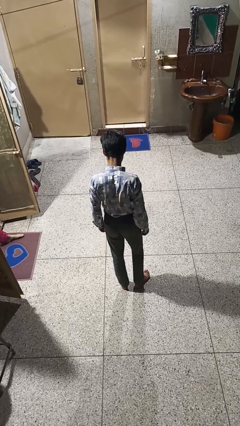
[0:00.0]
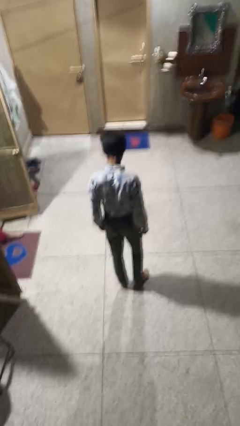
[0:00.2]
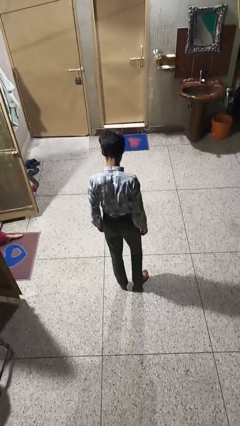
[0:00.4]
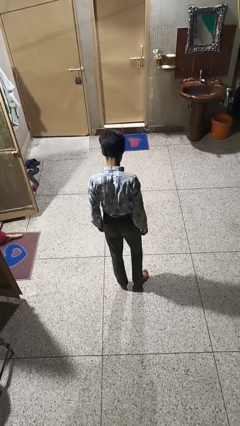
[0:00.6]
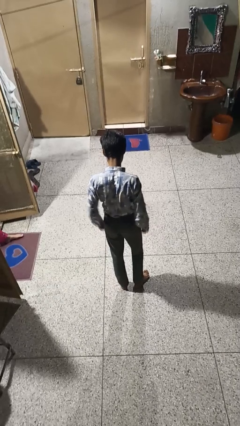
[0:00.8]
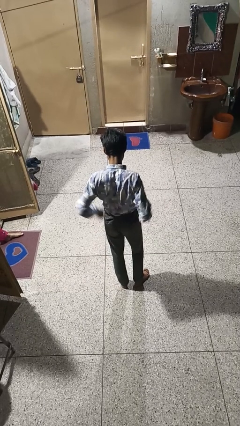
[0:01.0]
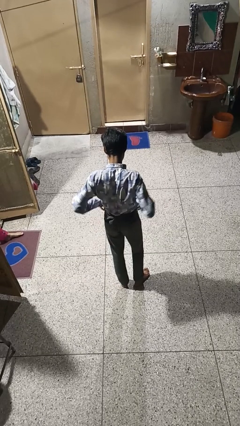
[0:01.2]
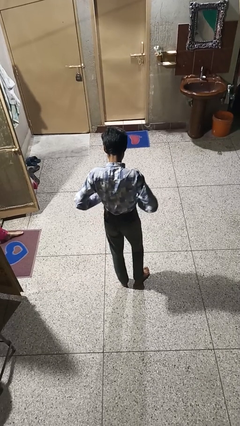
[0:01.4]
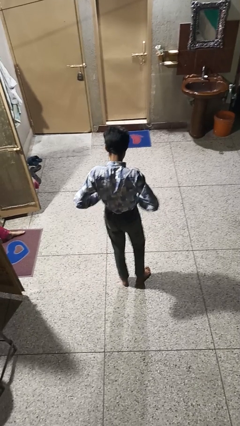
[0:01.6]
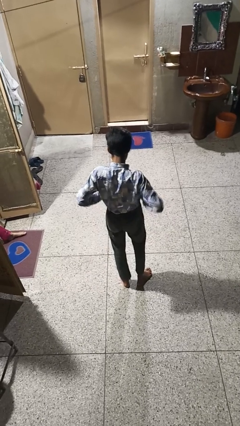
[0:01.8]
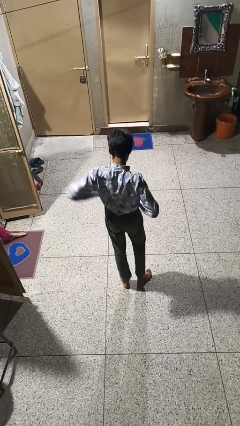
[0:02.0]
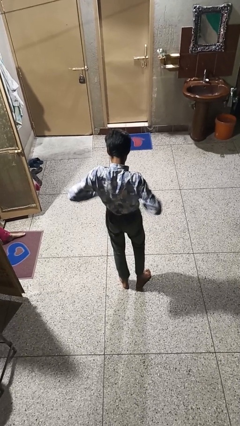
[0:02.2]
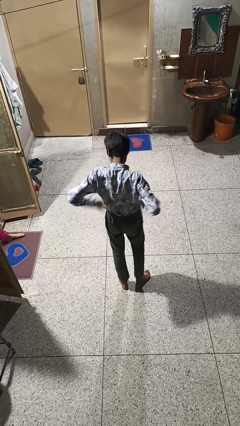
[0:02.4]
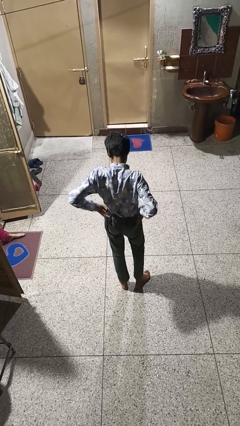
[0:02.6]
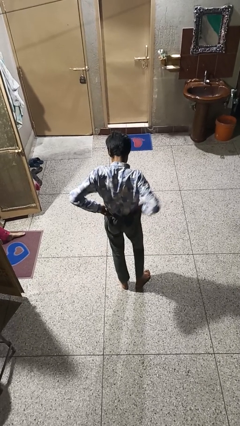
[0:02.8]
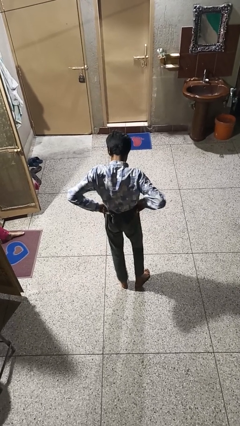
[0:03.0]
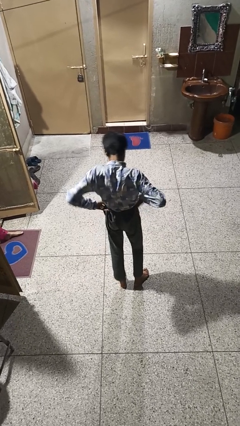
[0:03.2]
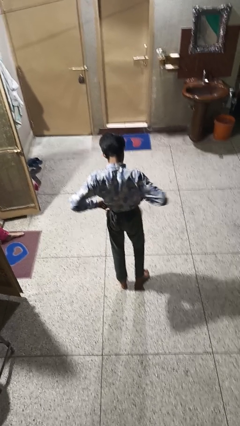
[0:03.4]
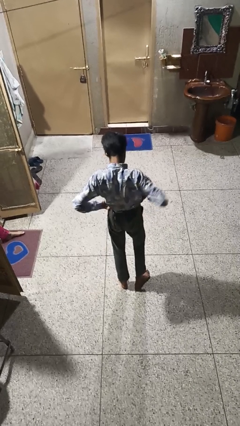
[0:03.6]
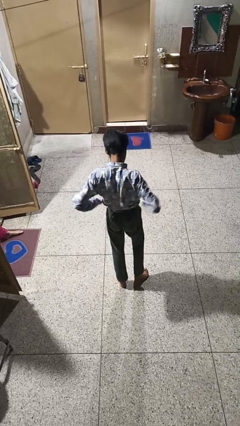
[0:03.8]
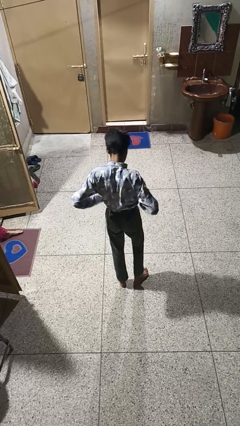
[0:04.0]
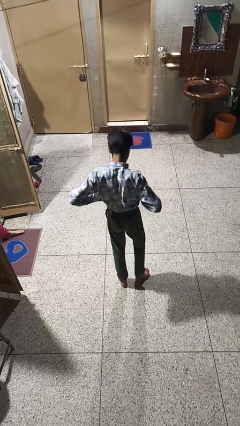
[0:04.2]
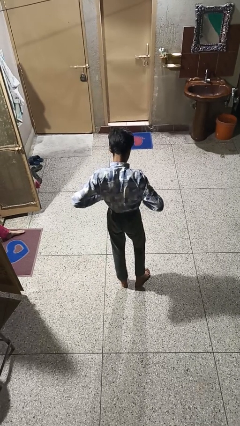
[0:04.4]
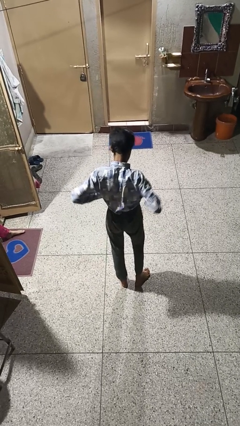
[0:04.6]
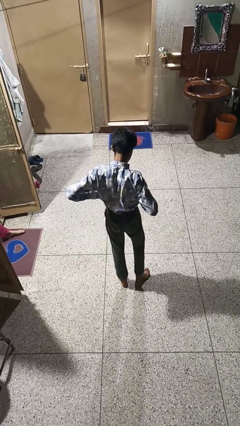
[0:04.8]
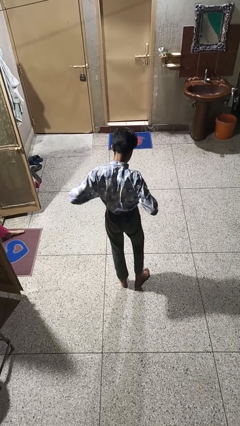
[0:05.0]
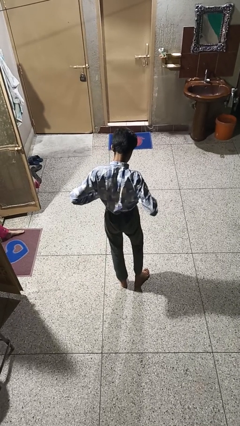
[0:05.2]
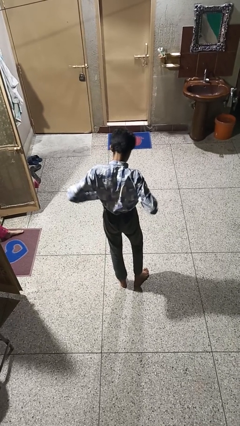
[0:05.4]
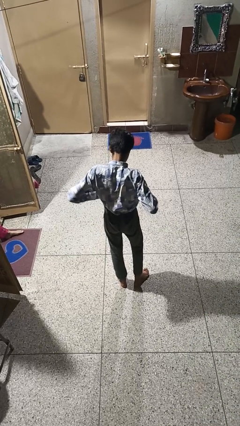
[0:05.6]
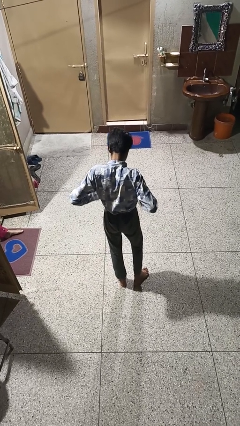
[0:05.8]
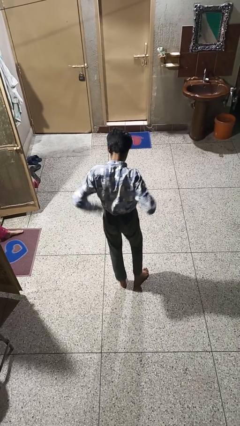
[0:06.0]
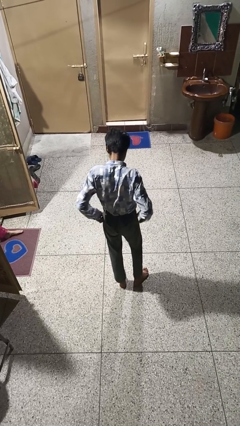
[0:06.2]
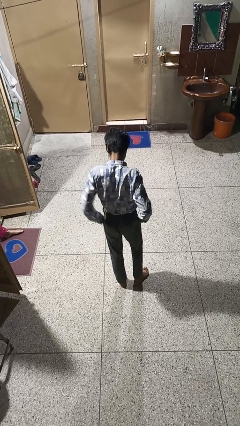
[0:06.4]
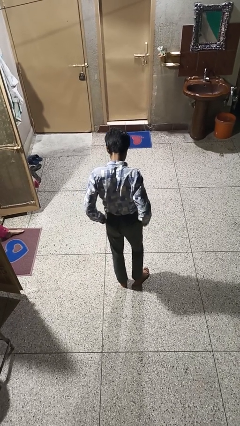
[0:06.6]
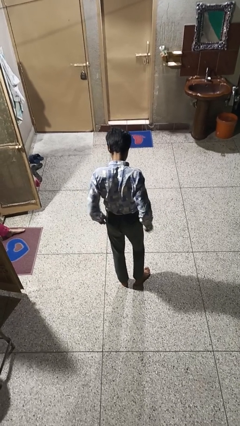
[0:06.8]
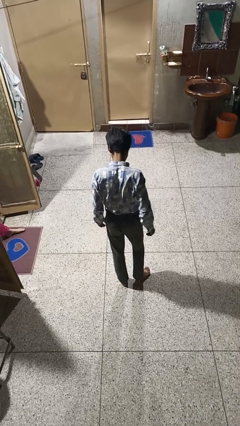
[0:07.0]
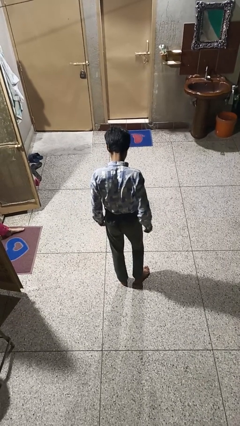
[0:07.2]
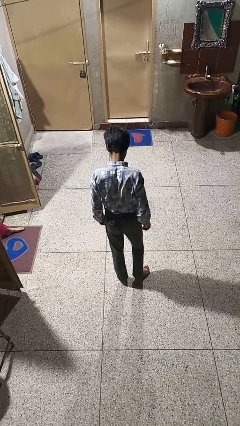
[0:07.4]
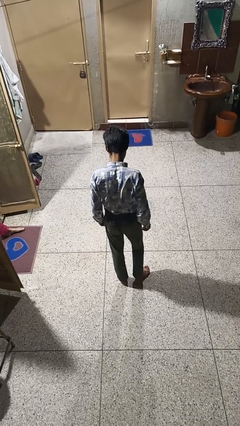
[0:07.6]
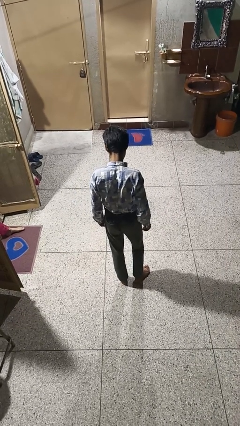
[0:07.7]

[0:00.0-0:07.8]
person hikes up pants

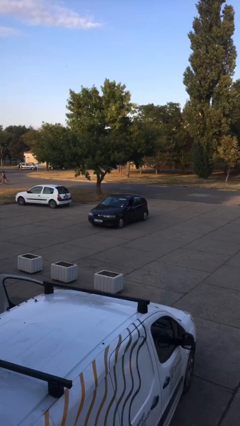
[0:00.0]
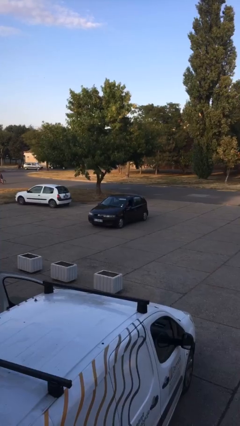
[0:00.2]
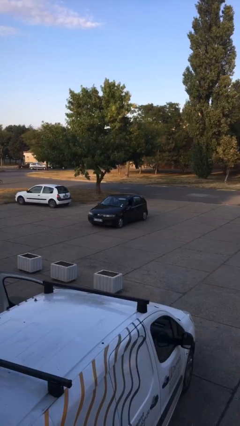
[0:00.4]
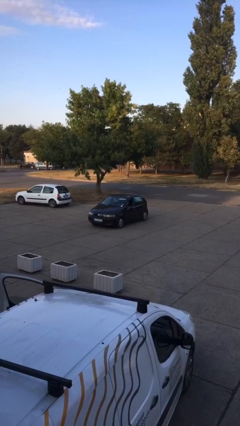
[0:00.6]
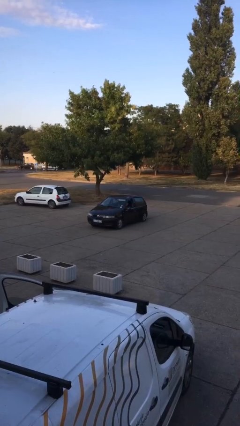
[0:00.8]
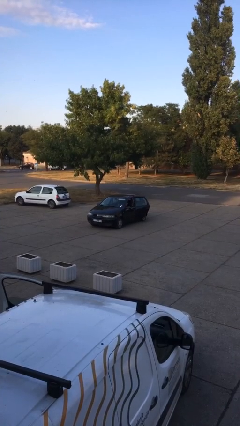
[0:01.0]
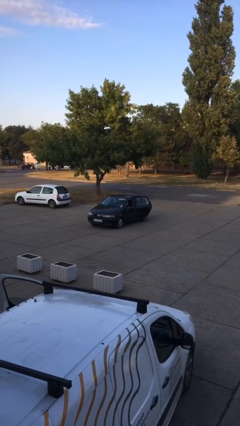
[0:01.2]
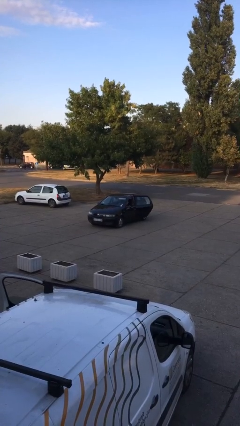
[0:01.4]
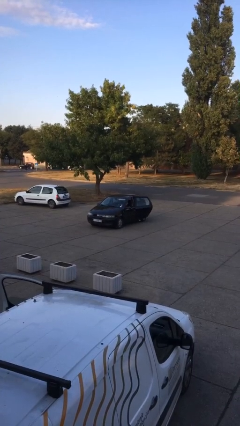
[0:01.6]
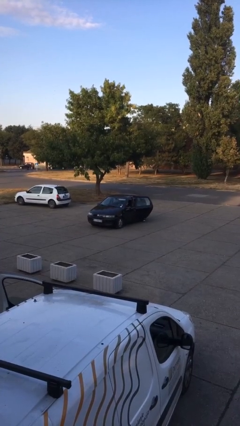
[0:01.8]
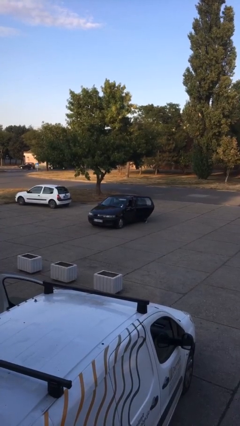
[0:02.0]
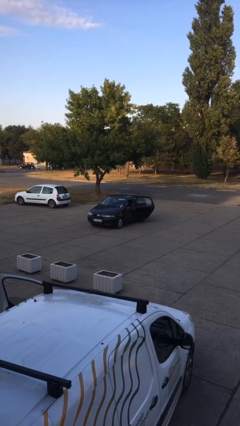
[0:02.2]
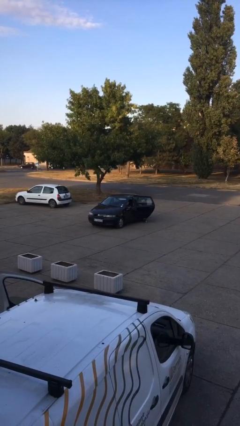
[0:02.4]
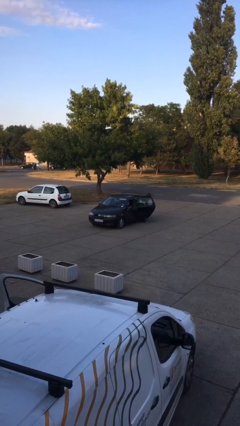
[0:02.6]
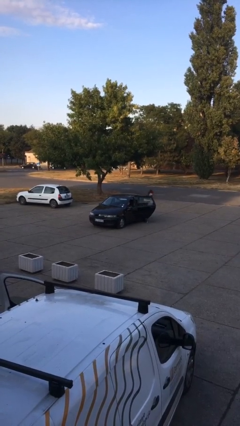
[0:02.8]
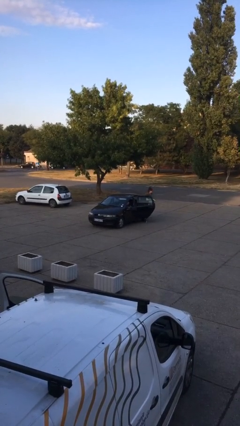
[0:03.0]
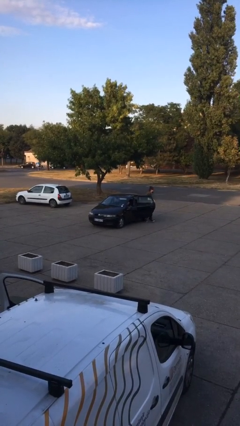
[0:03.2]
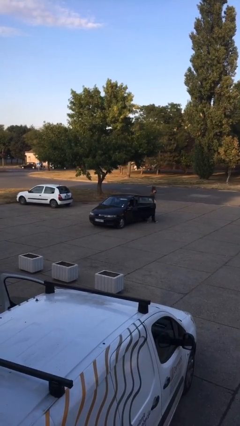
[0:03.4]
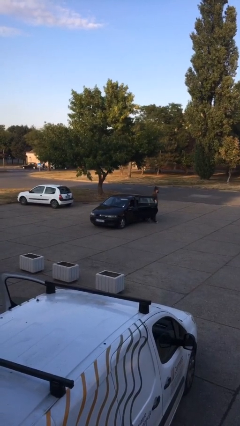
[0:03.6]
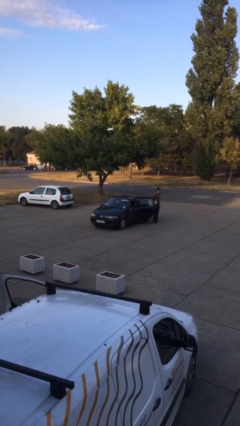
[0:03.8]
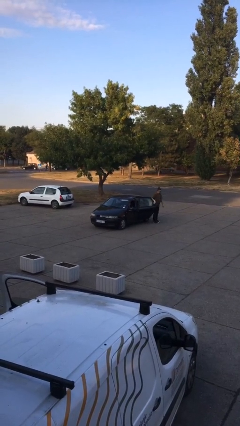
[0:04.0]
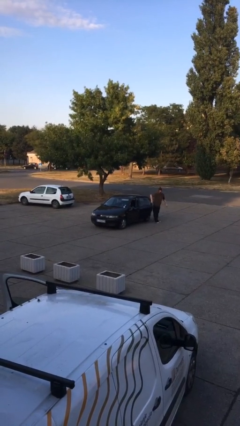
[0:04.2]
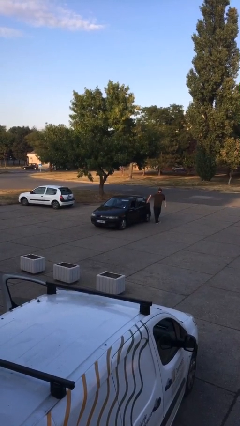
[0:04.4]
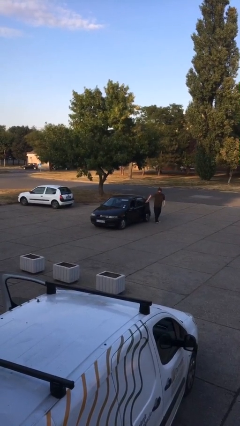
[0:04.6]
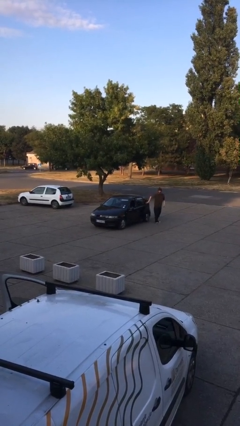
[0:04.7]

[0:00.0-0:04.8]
car drops off person

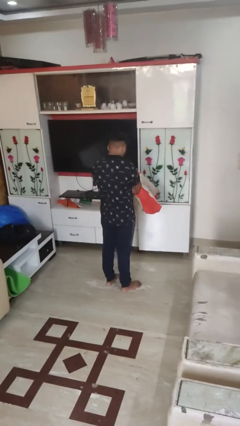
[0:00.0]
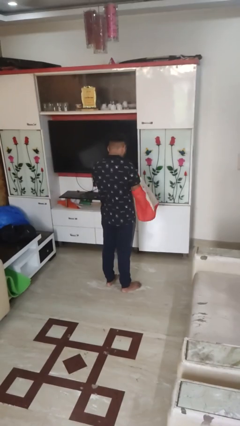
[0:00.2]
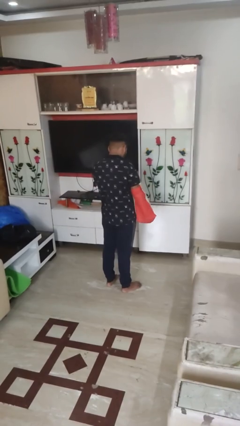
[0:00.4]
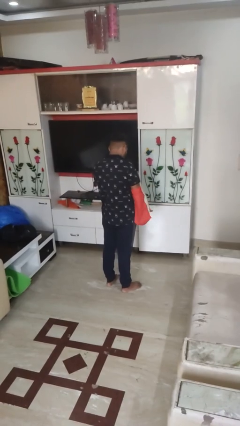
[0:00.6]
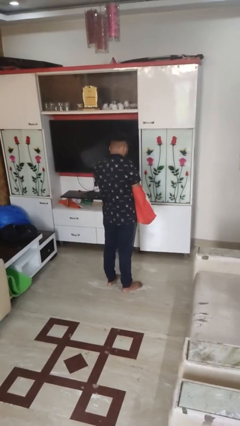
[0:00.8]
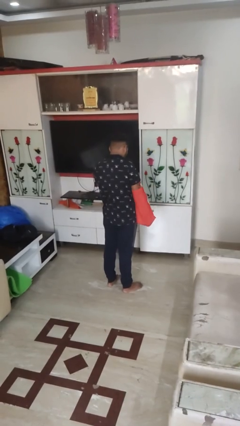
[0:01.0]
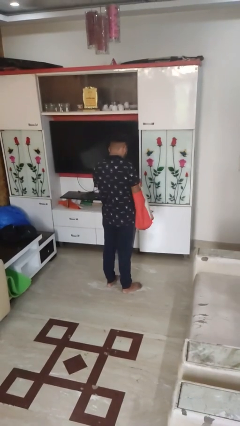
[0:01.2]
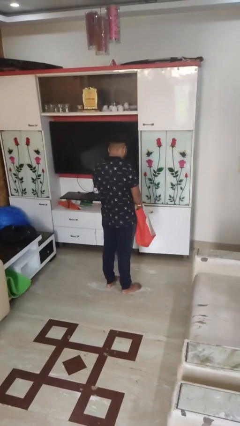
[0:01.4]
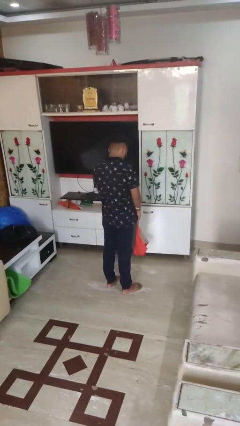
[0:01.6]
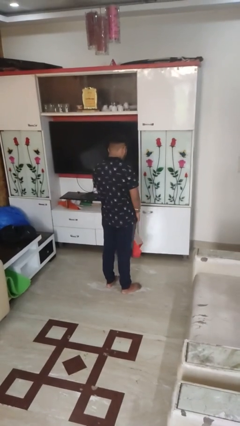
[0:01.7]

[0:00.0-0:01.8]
person searches in bag

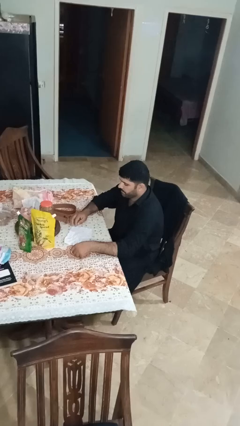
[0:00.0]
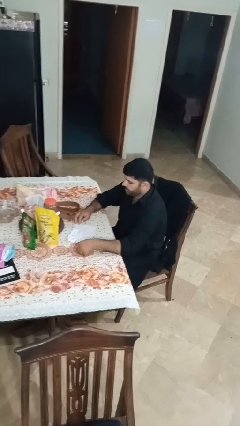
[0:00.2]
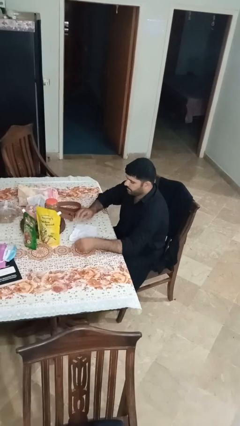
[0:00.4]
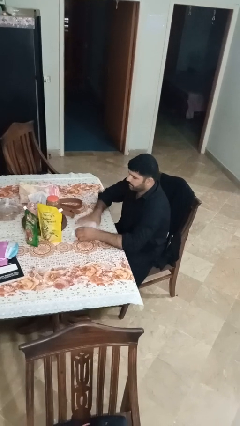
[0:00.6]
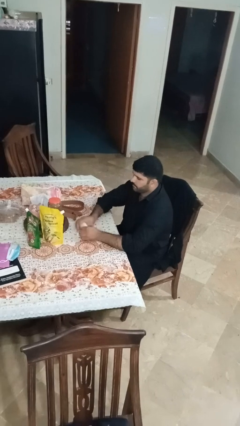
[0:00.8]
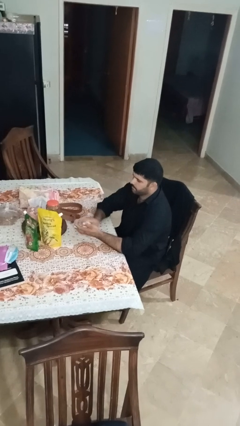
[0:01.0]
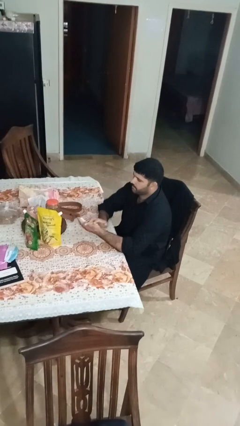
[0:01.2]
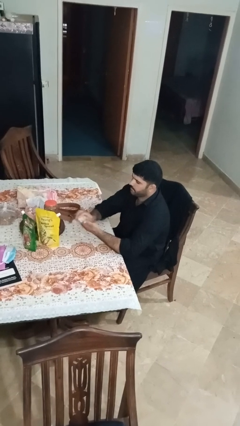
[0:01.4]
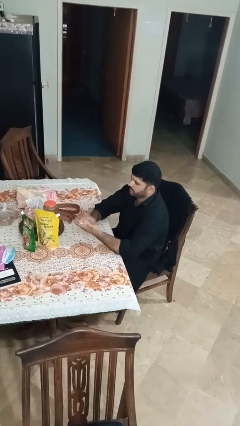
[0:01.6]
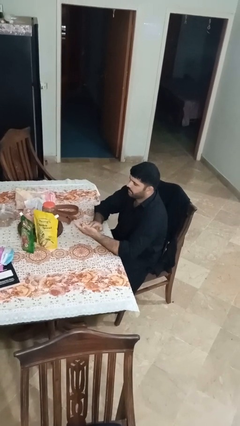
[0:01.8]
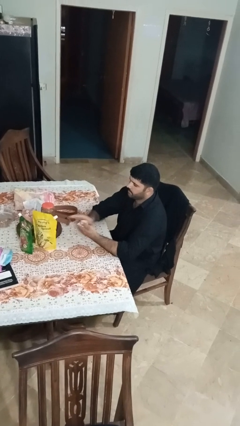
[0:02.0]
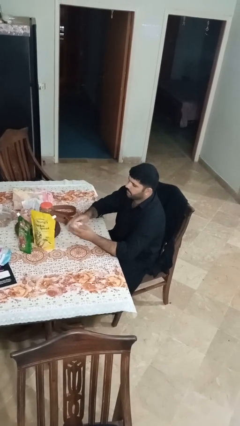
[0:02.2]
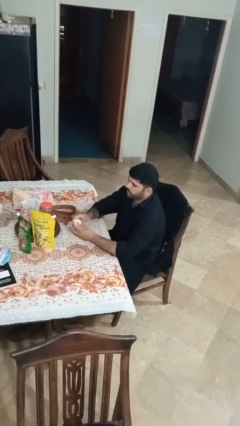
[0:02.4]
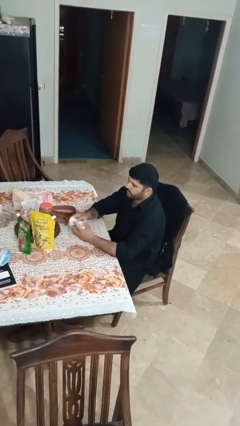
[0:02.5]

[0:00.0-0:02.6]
person crumples paper

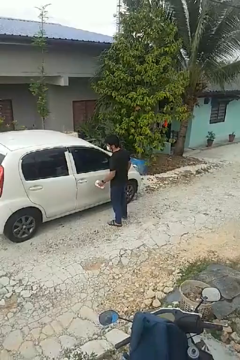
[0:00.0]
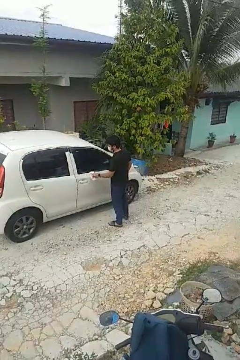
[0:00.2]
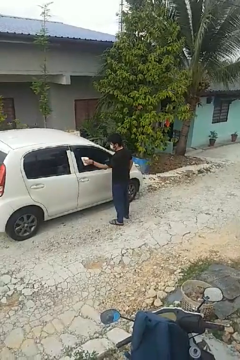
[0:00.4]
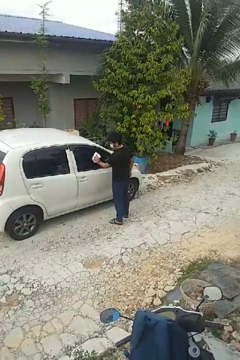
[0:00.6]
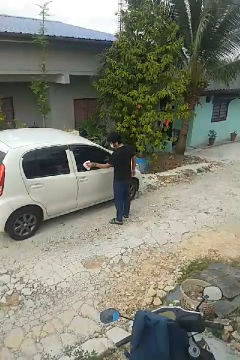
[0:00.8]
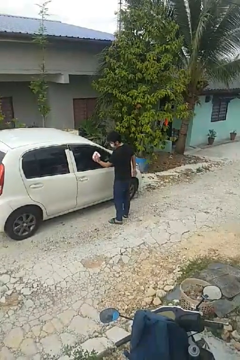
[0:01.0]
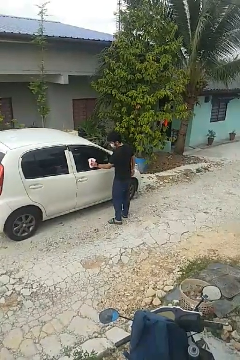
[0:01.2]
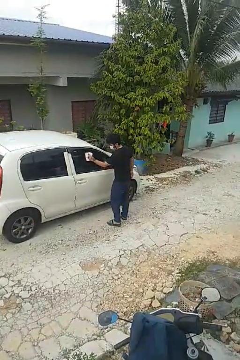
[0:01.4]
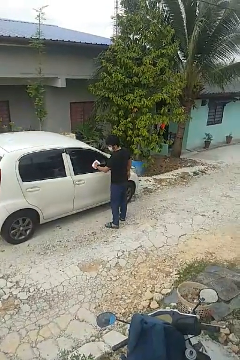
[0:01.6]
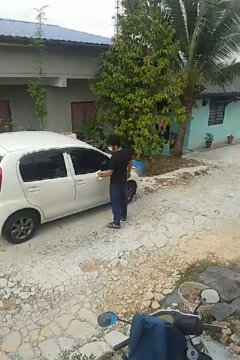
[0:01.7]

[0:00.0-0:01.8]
person polishes car with rag
